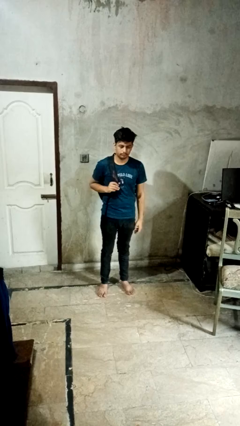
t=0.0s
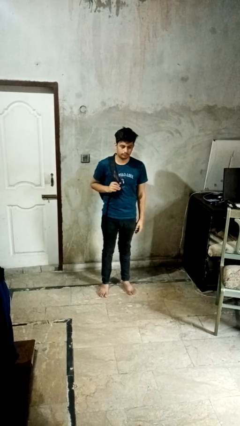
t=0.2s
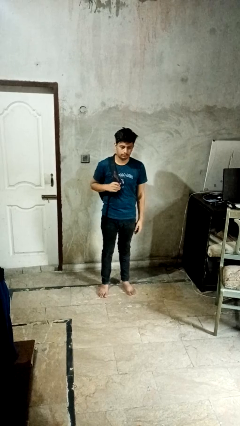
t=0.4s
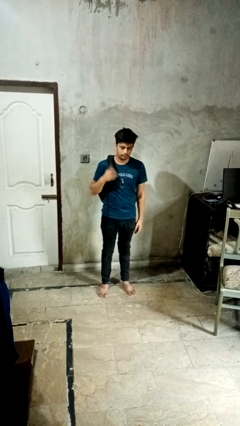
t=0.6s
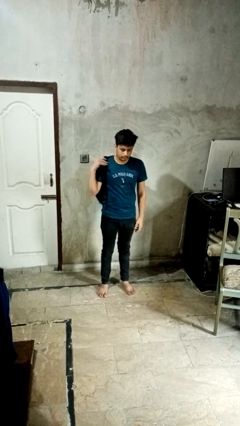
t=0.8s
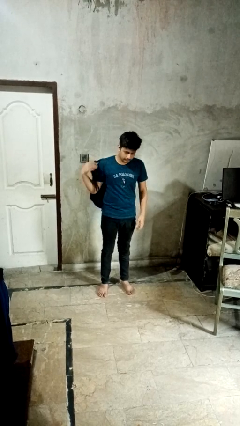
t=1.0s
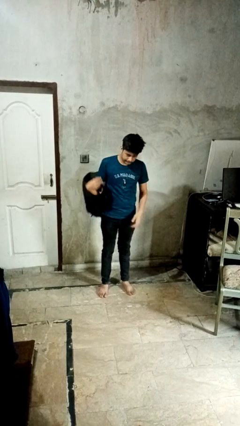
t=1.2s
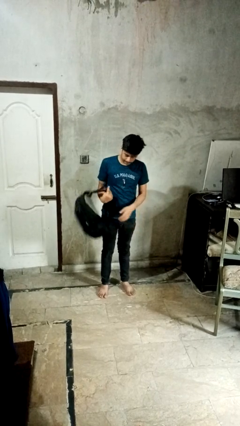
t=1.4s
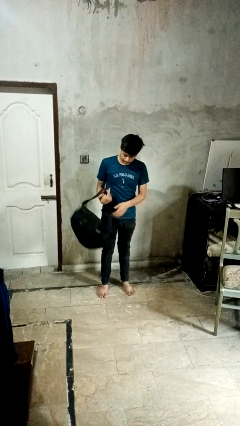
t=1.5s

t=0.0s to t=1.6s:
person takes off backpack

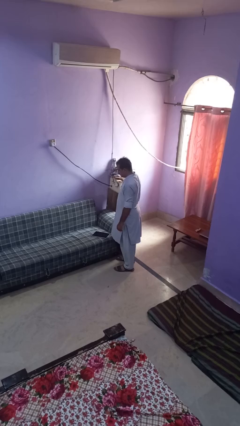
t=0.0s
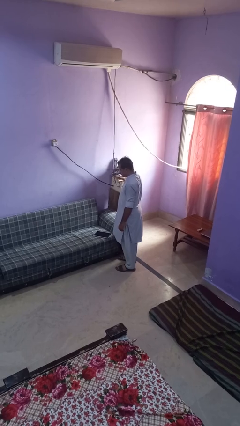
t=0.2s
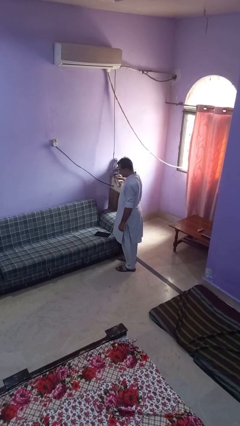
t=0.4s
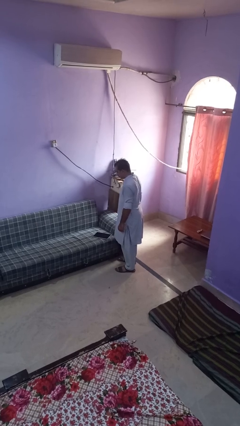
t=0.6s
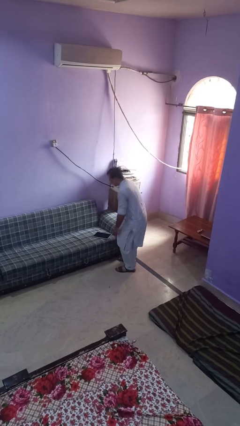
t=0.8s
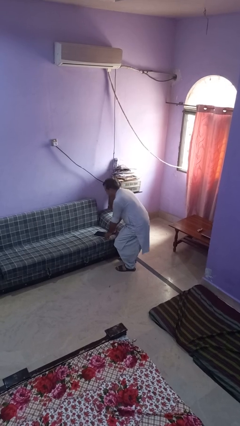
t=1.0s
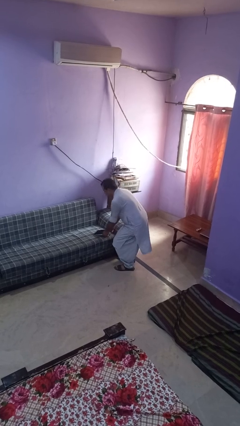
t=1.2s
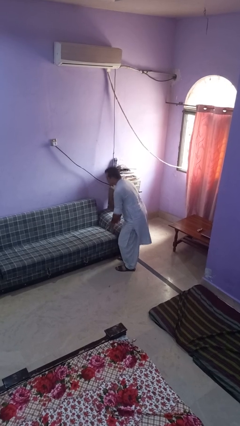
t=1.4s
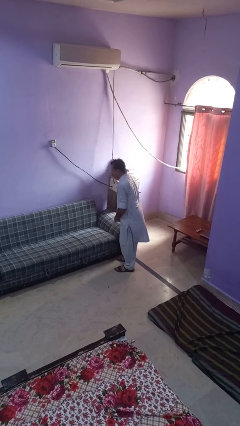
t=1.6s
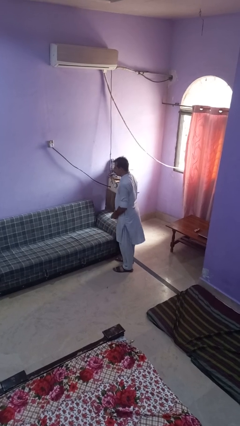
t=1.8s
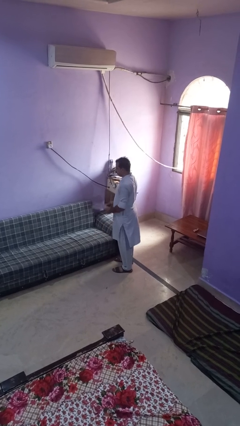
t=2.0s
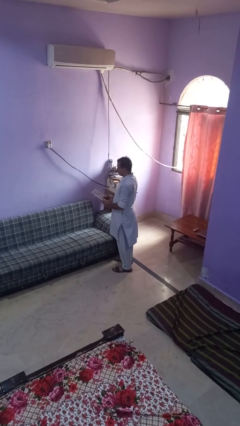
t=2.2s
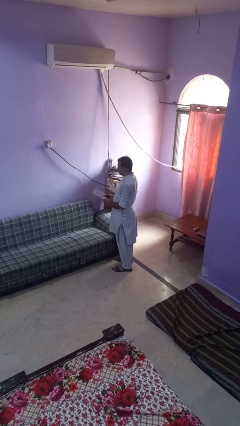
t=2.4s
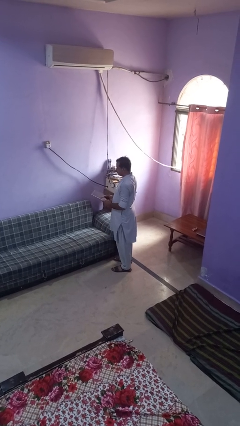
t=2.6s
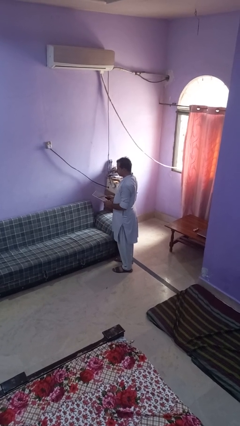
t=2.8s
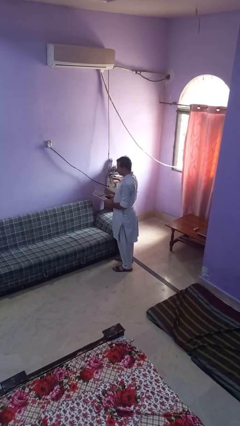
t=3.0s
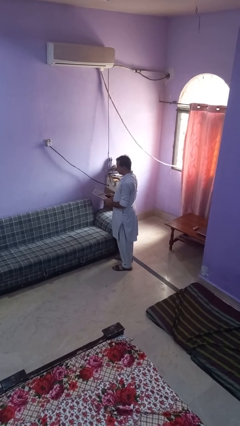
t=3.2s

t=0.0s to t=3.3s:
person picks up object from couch

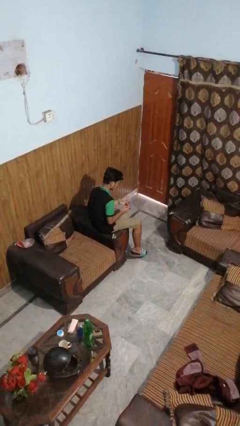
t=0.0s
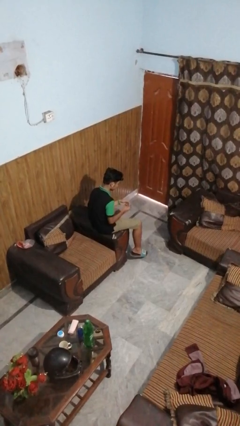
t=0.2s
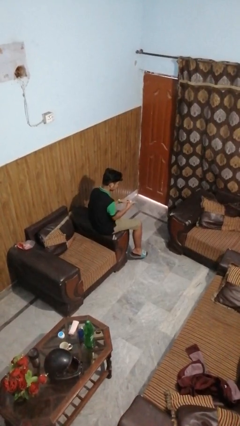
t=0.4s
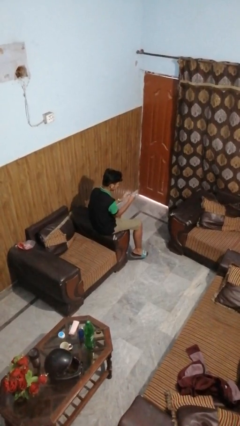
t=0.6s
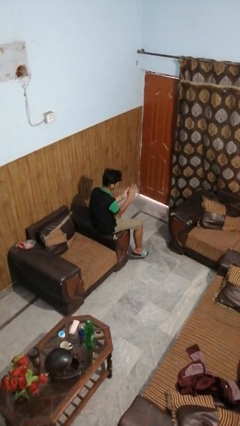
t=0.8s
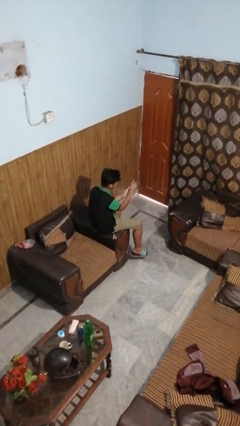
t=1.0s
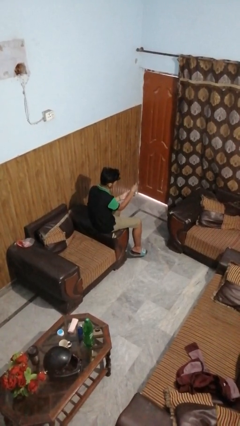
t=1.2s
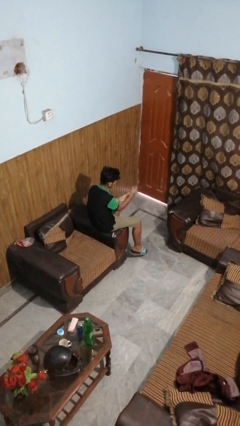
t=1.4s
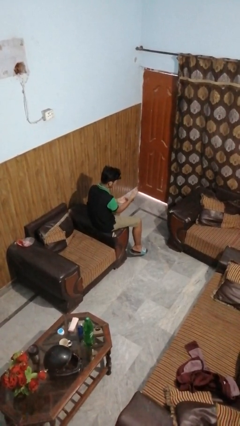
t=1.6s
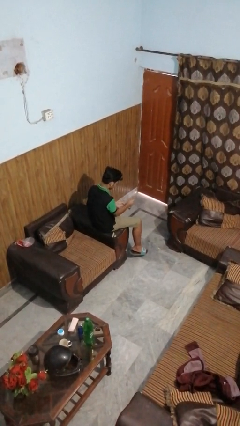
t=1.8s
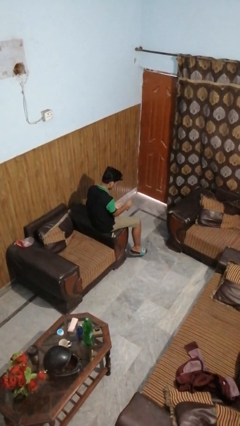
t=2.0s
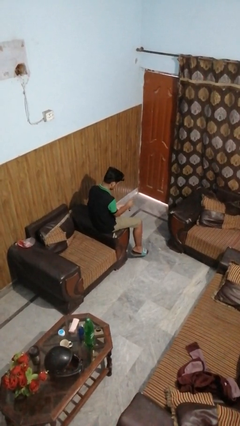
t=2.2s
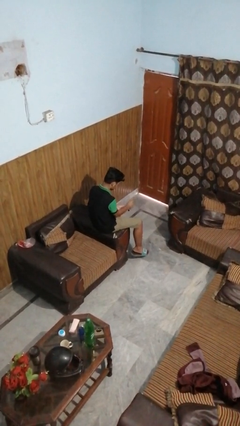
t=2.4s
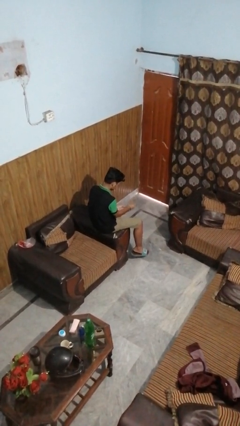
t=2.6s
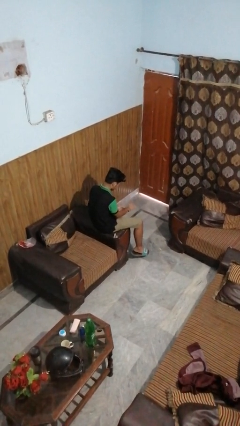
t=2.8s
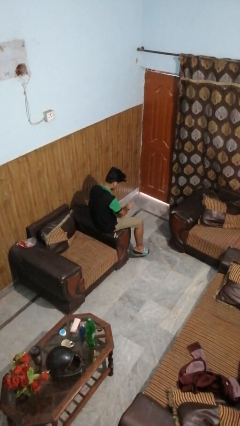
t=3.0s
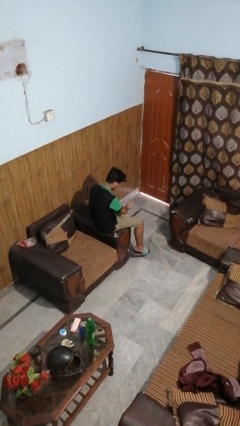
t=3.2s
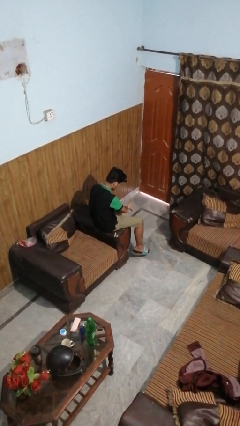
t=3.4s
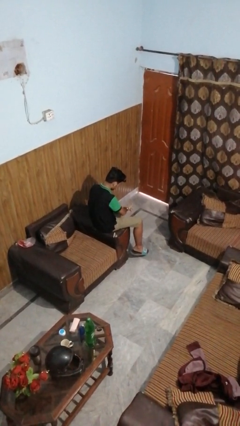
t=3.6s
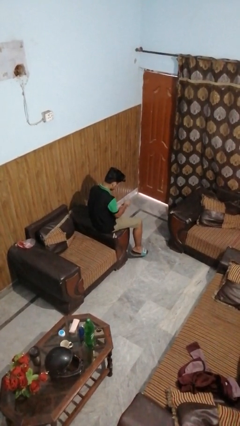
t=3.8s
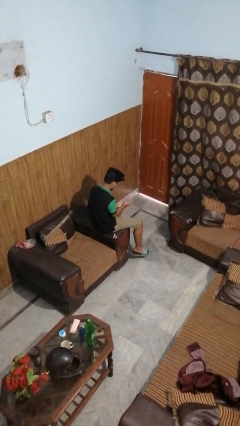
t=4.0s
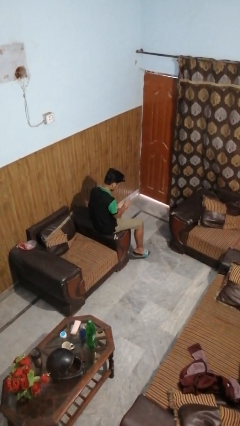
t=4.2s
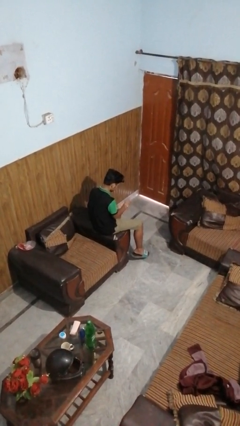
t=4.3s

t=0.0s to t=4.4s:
person puts on wristwatch

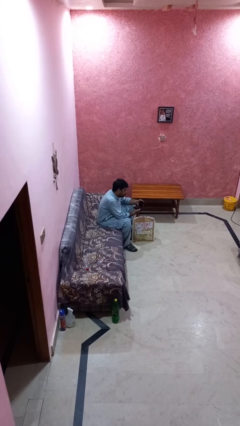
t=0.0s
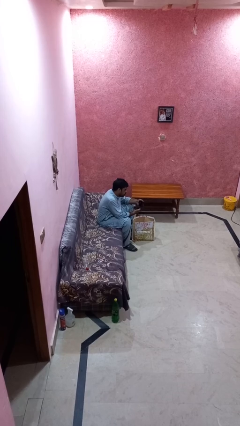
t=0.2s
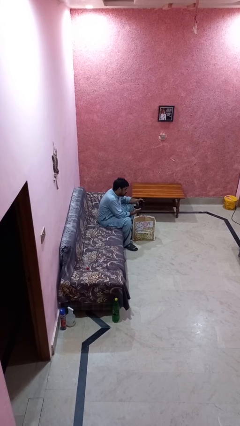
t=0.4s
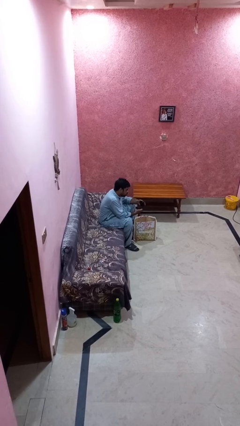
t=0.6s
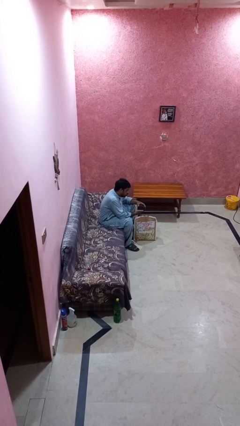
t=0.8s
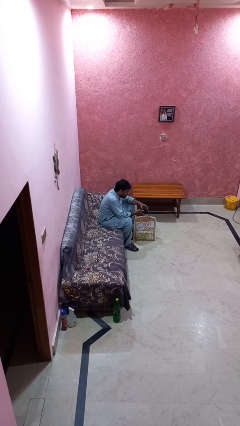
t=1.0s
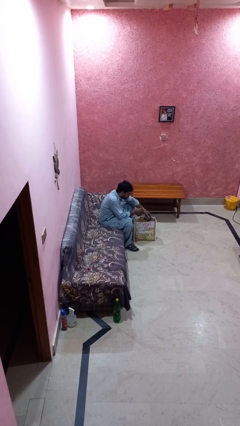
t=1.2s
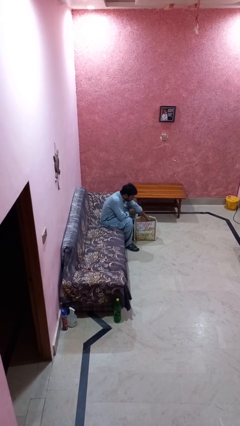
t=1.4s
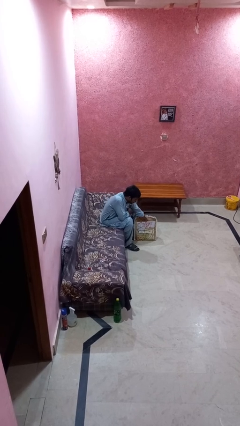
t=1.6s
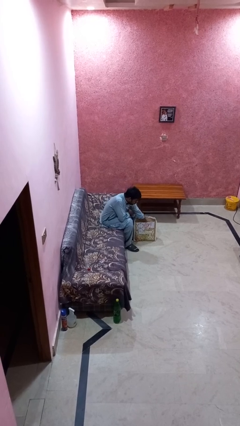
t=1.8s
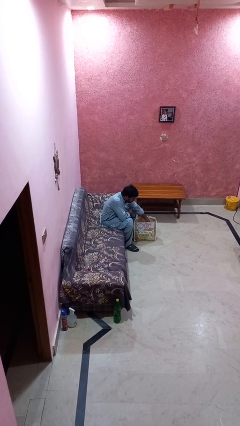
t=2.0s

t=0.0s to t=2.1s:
person puts object into bag

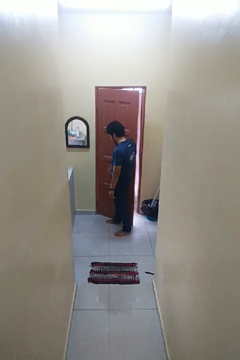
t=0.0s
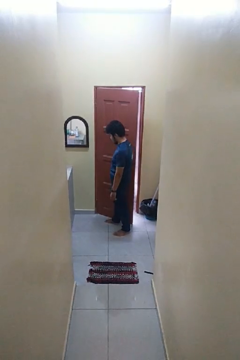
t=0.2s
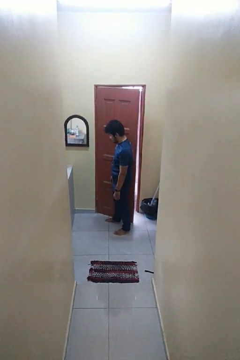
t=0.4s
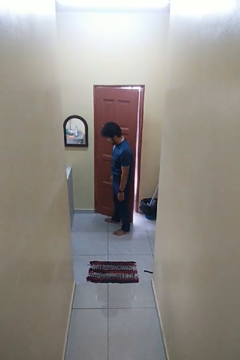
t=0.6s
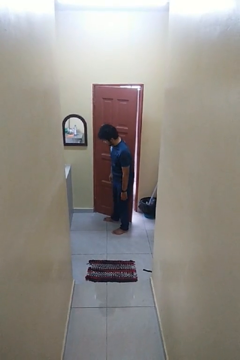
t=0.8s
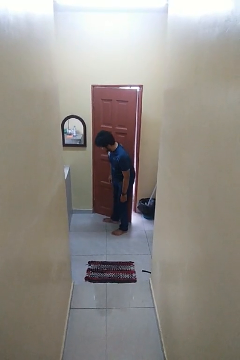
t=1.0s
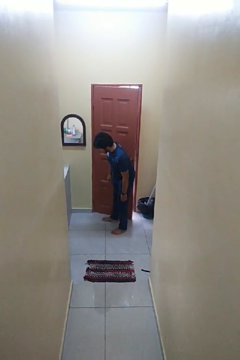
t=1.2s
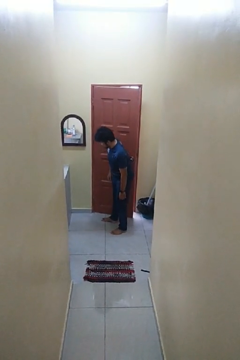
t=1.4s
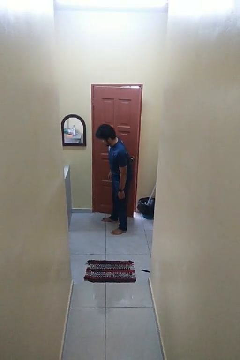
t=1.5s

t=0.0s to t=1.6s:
person closes door with hip

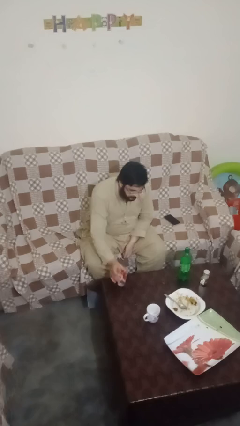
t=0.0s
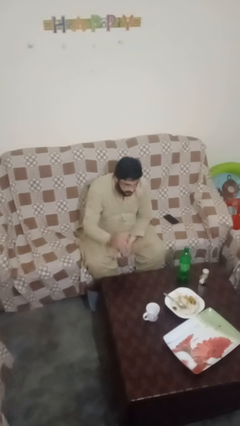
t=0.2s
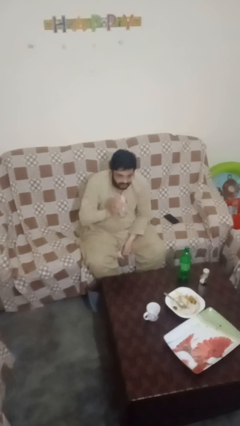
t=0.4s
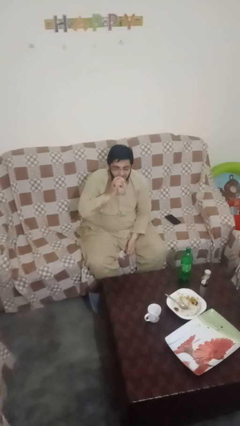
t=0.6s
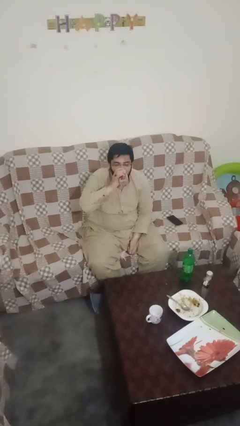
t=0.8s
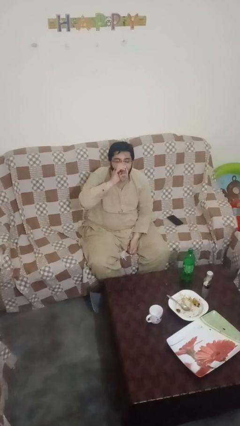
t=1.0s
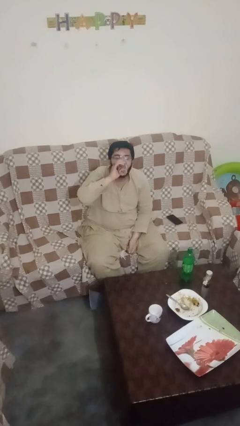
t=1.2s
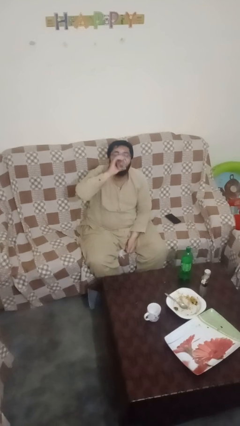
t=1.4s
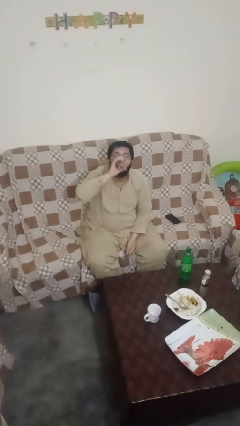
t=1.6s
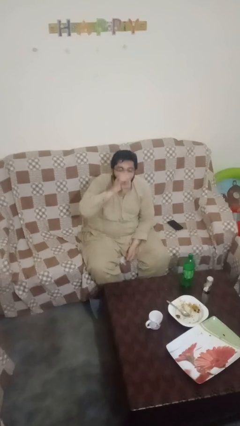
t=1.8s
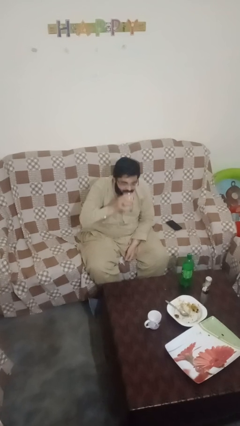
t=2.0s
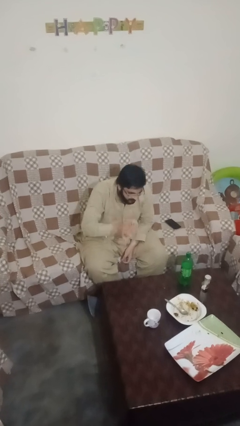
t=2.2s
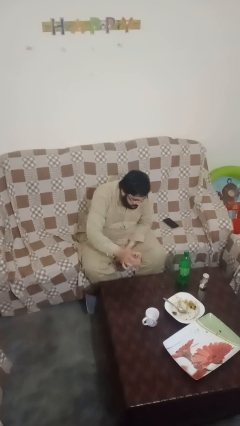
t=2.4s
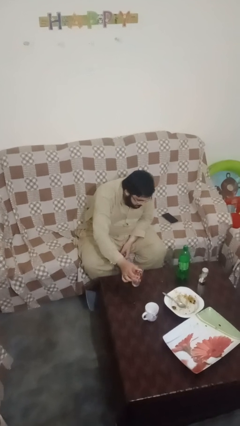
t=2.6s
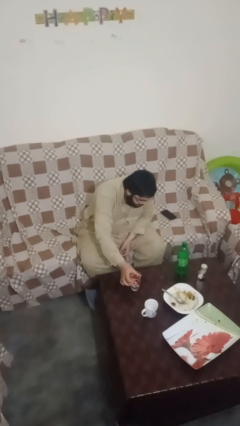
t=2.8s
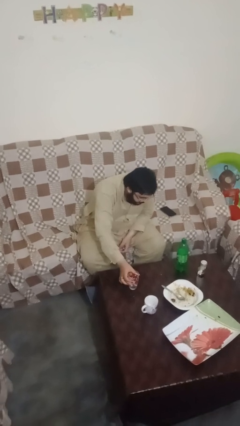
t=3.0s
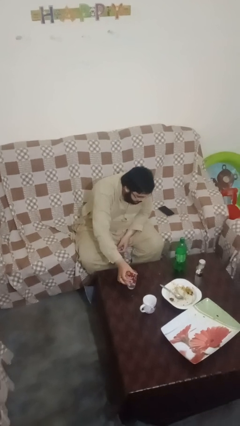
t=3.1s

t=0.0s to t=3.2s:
person drinks from cup

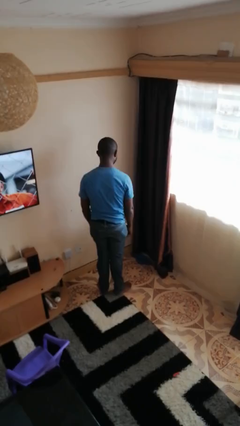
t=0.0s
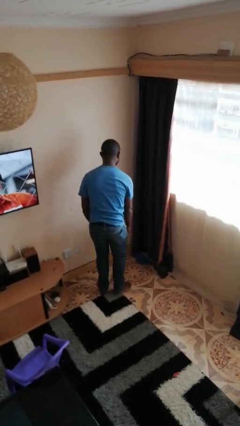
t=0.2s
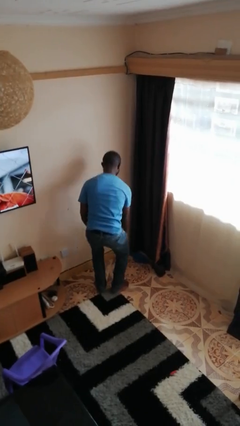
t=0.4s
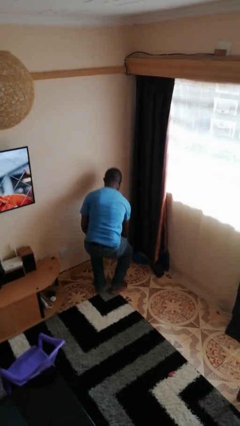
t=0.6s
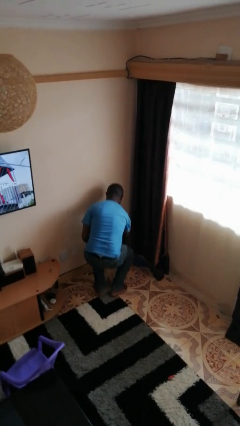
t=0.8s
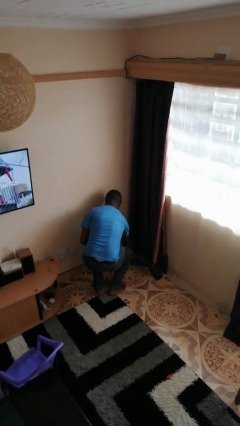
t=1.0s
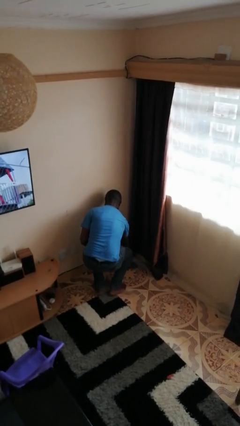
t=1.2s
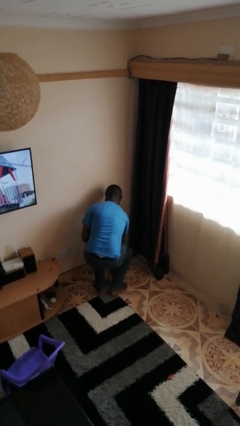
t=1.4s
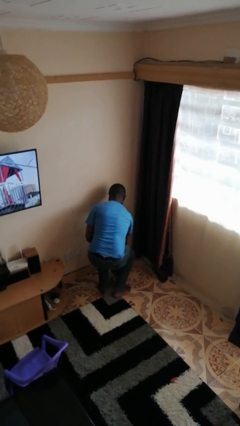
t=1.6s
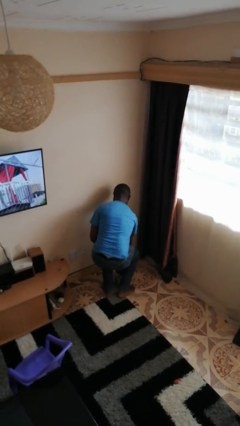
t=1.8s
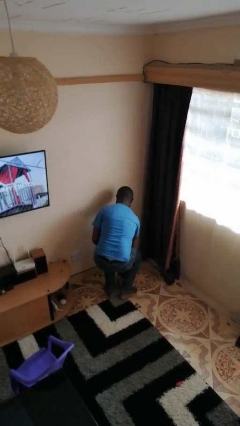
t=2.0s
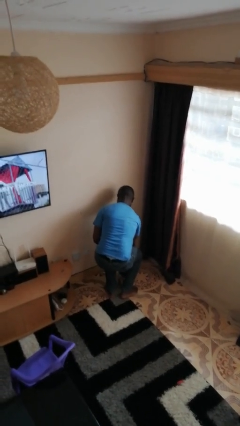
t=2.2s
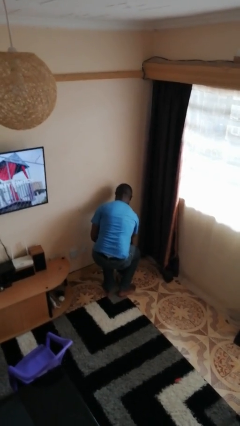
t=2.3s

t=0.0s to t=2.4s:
person picks up object from floor
